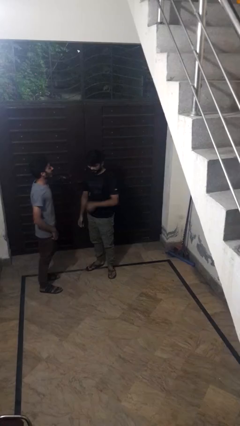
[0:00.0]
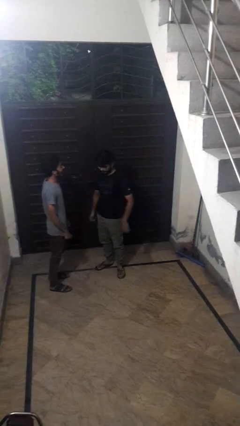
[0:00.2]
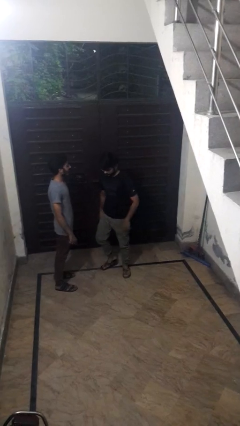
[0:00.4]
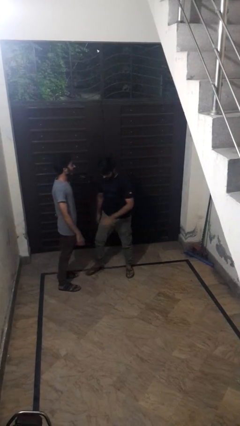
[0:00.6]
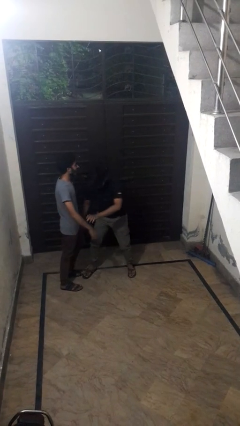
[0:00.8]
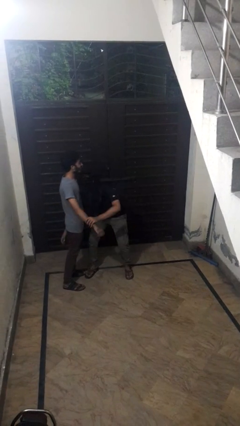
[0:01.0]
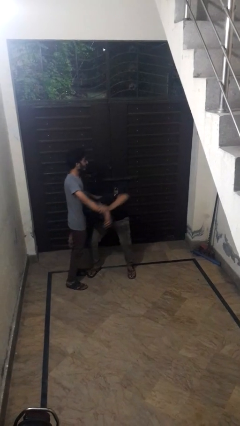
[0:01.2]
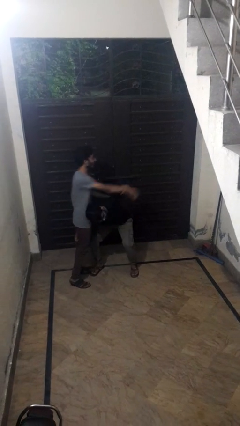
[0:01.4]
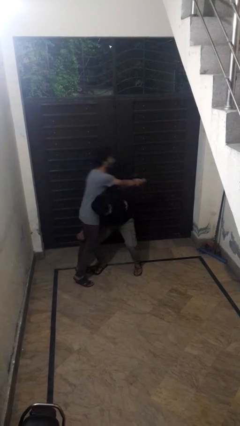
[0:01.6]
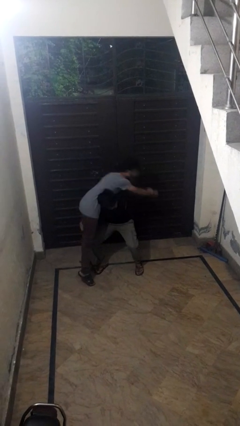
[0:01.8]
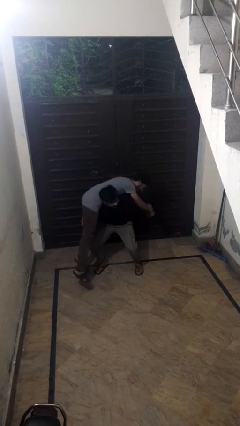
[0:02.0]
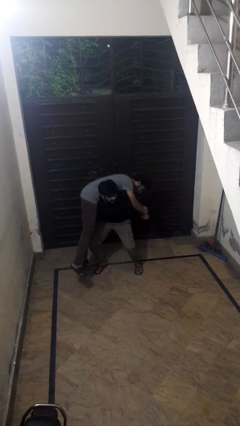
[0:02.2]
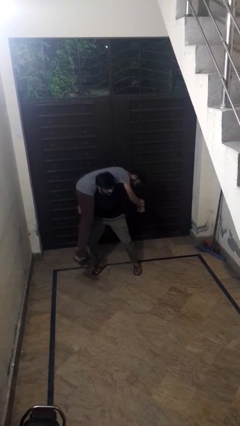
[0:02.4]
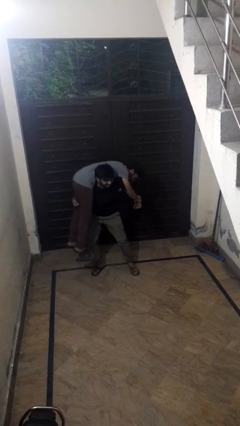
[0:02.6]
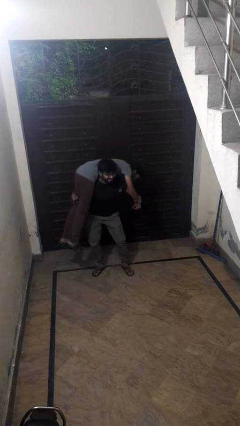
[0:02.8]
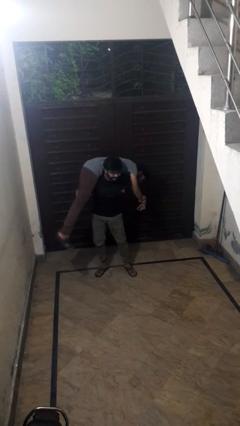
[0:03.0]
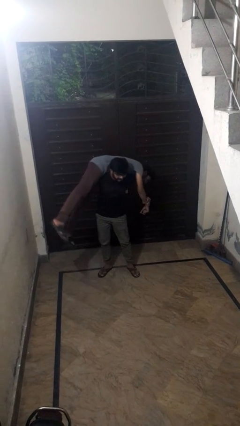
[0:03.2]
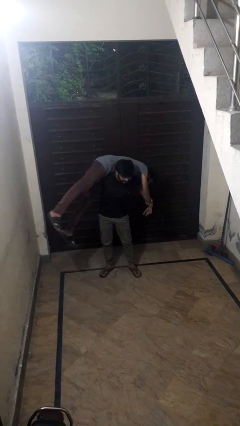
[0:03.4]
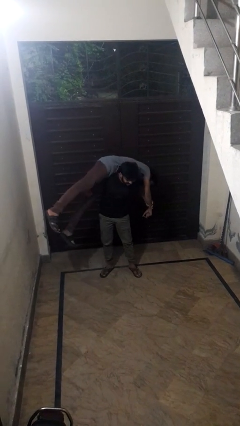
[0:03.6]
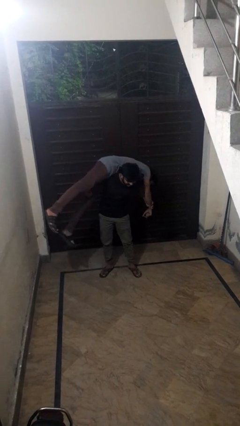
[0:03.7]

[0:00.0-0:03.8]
person carries person over shoulder

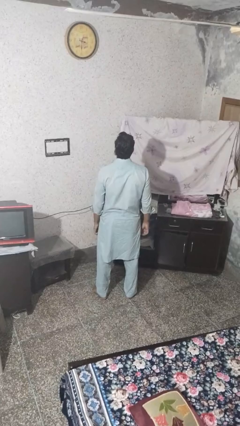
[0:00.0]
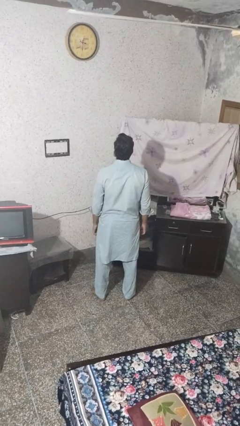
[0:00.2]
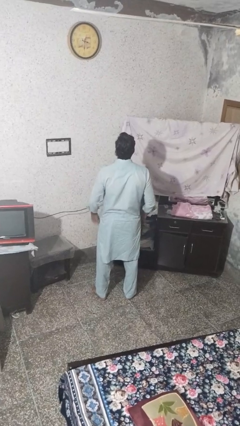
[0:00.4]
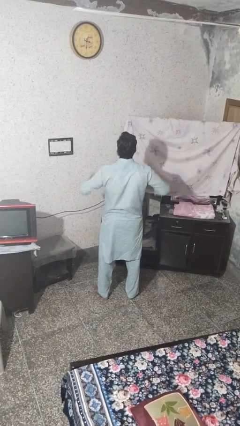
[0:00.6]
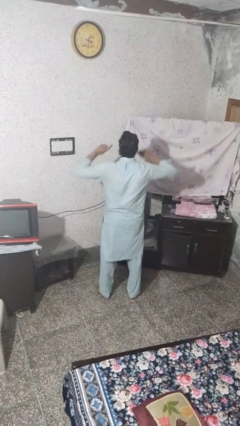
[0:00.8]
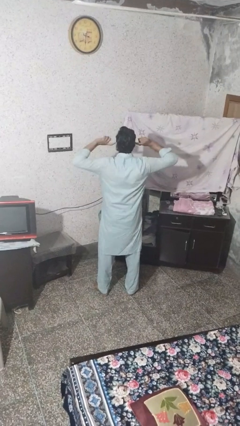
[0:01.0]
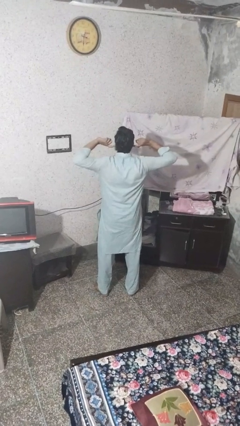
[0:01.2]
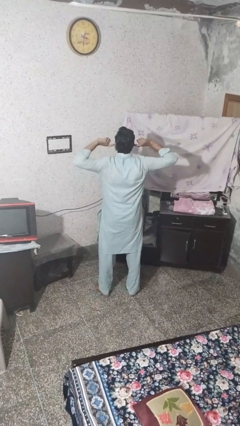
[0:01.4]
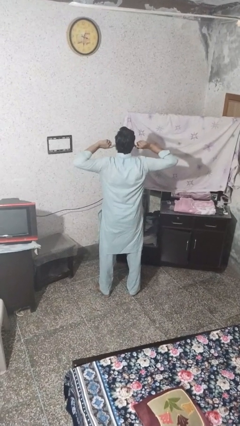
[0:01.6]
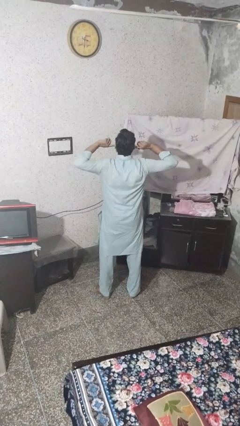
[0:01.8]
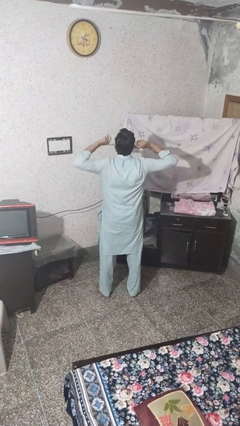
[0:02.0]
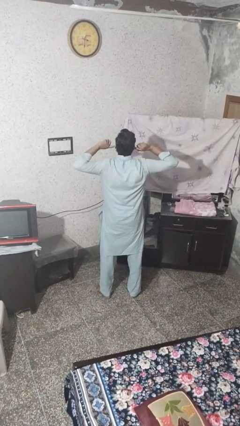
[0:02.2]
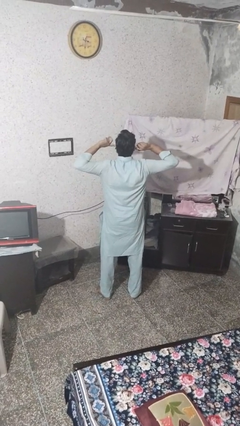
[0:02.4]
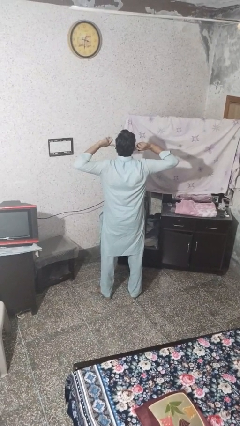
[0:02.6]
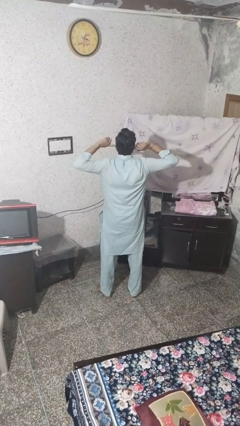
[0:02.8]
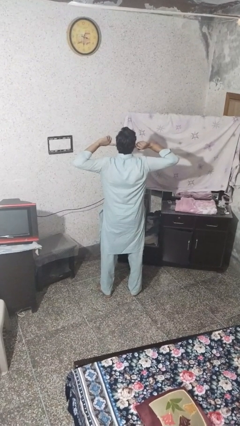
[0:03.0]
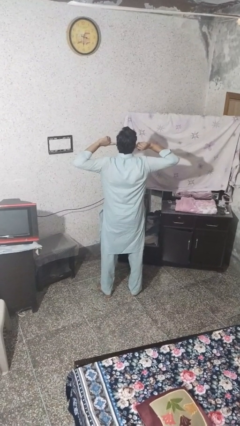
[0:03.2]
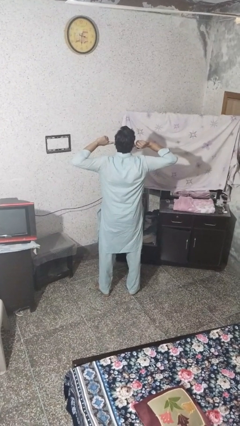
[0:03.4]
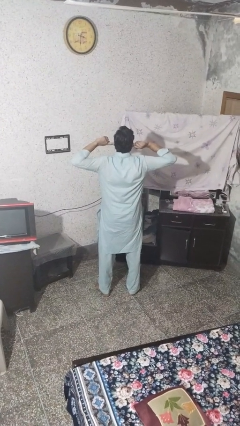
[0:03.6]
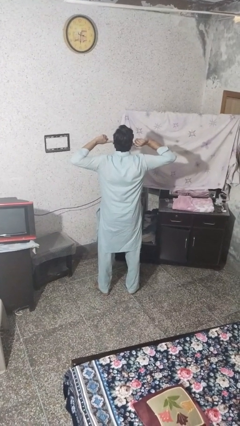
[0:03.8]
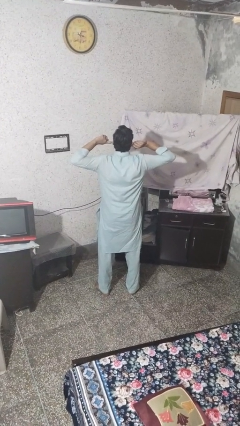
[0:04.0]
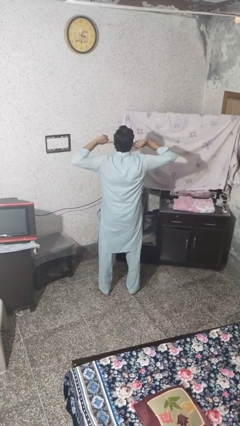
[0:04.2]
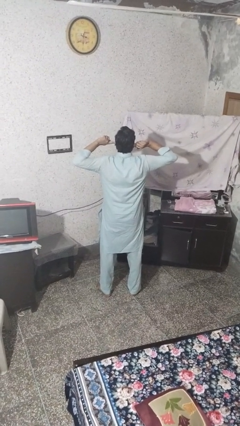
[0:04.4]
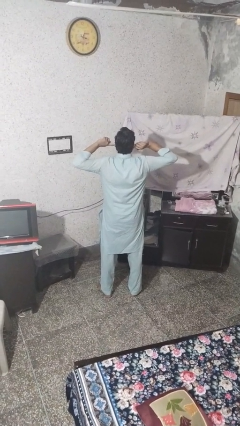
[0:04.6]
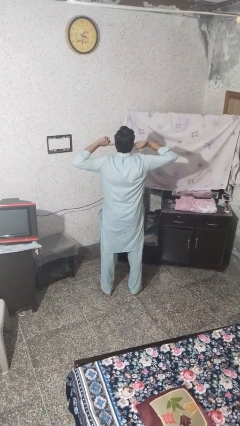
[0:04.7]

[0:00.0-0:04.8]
person puts fingers in ear

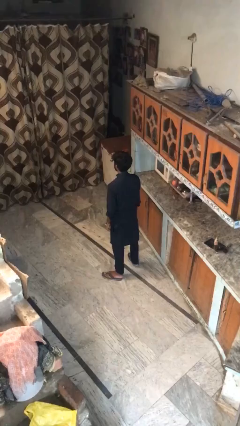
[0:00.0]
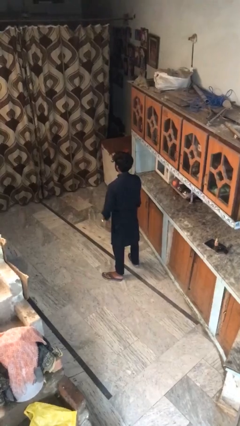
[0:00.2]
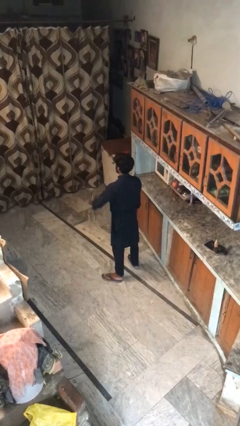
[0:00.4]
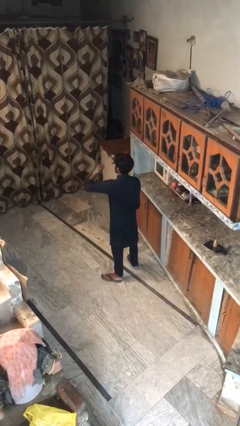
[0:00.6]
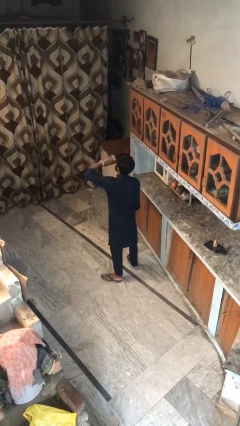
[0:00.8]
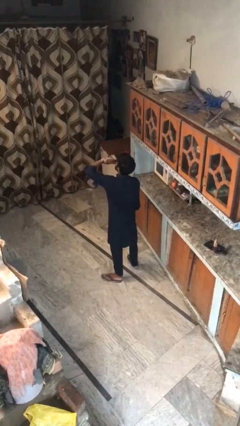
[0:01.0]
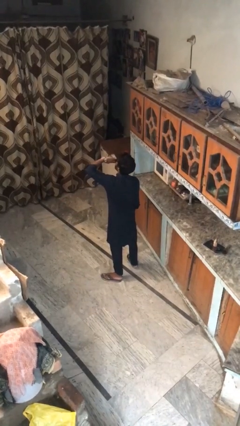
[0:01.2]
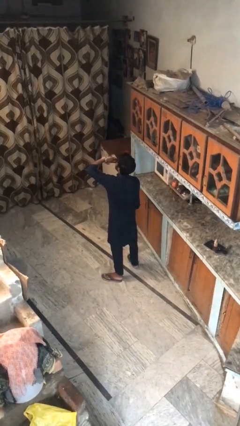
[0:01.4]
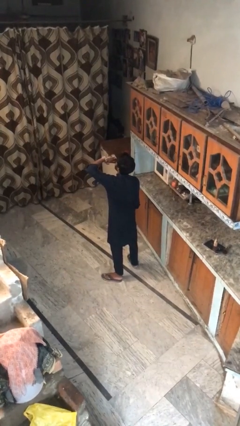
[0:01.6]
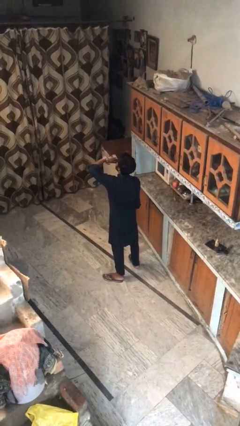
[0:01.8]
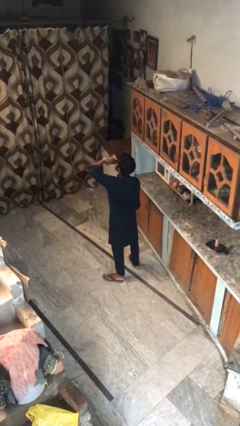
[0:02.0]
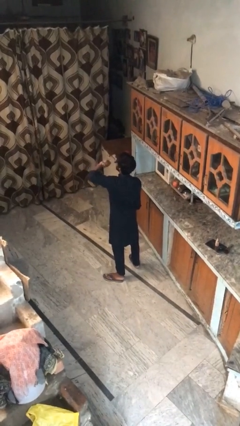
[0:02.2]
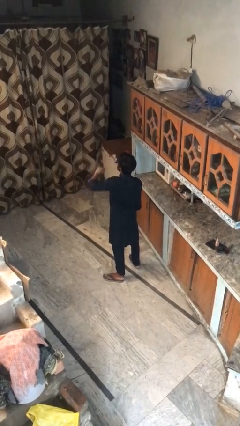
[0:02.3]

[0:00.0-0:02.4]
person yawns

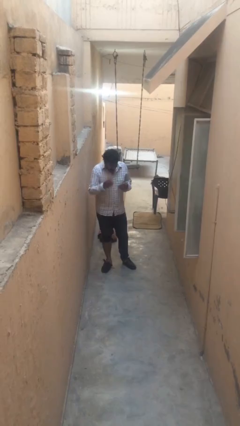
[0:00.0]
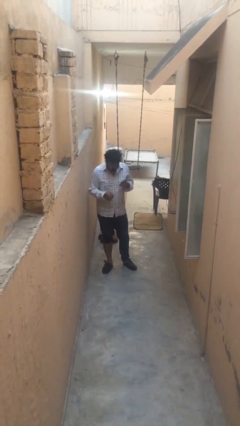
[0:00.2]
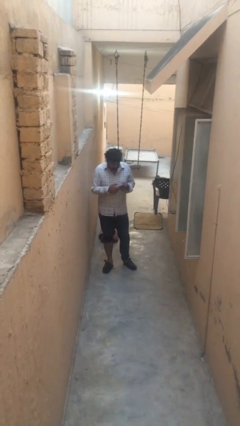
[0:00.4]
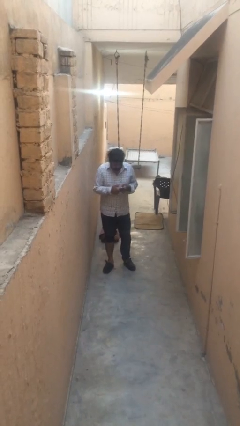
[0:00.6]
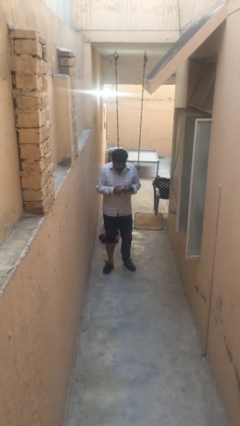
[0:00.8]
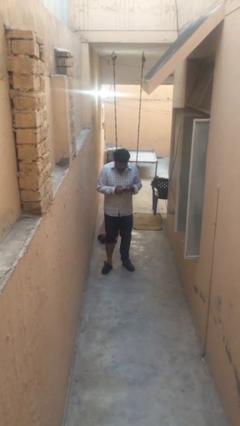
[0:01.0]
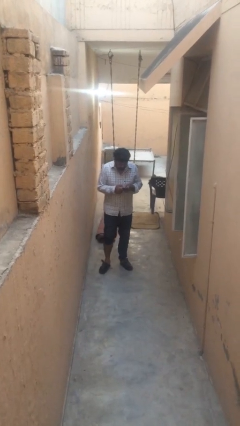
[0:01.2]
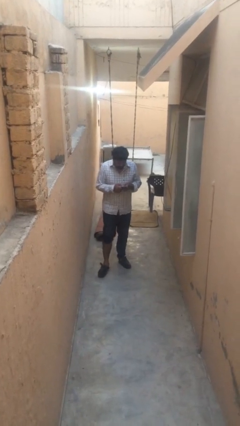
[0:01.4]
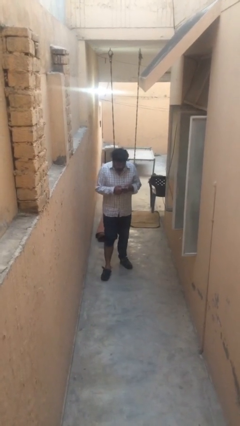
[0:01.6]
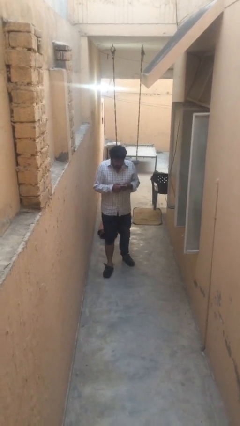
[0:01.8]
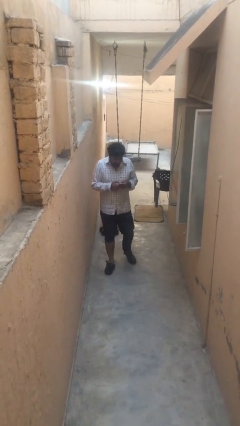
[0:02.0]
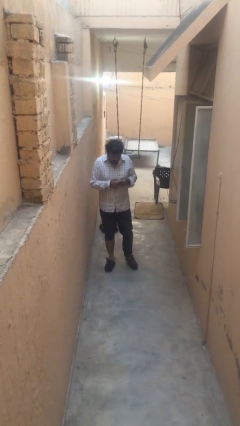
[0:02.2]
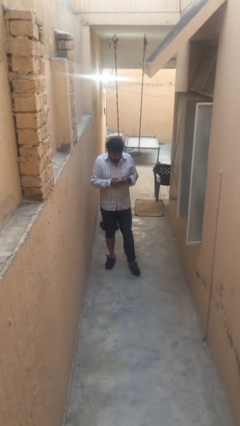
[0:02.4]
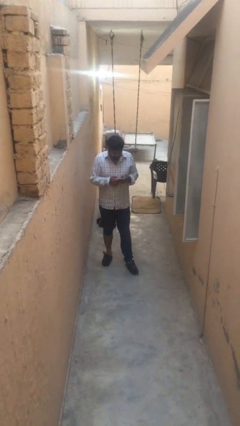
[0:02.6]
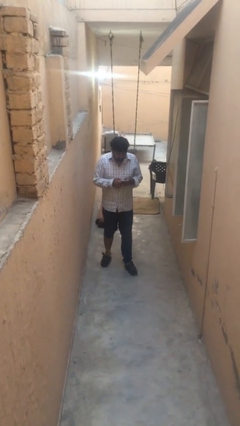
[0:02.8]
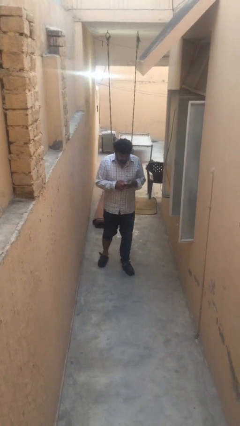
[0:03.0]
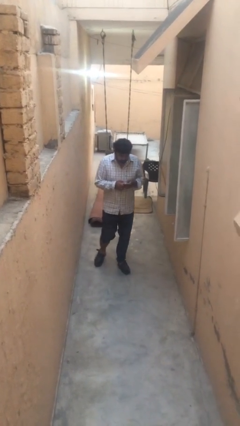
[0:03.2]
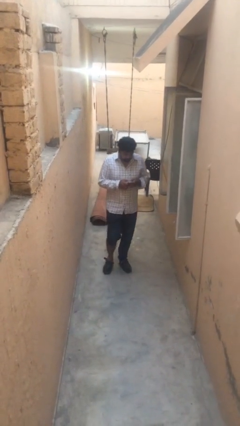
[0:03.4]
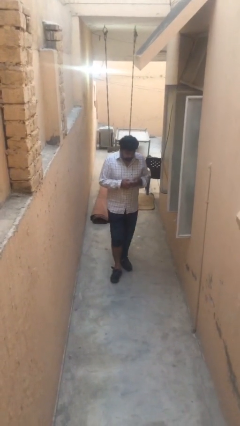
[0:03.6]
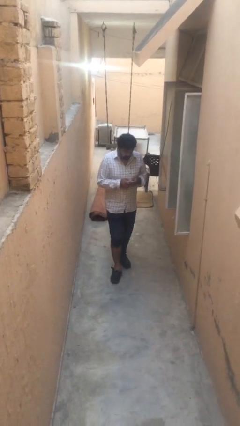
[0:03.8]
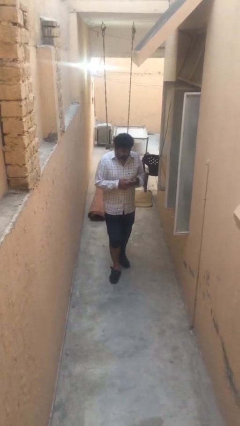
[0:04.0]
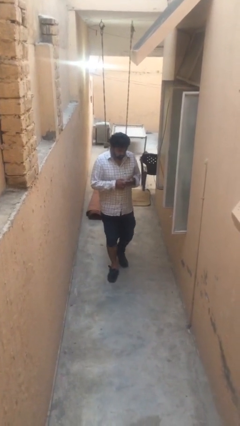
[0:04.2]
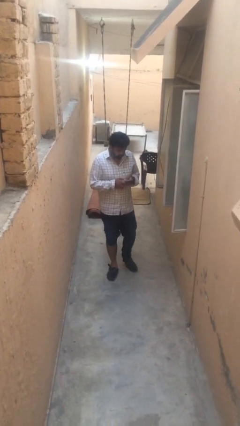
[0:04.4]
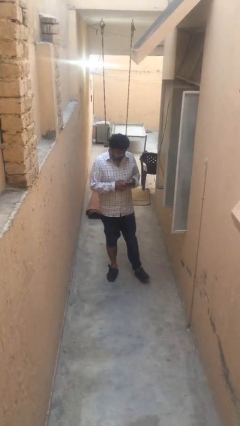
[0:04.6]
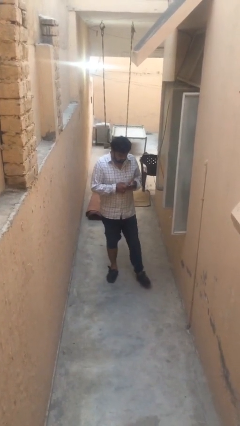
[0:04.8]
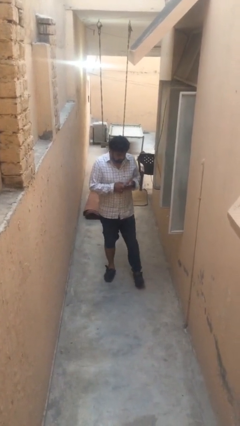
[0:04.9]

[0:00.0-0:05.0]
person texts on phone

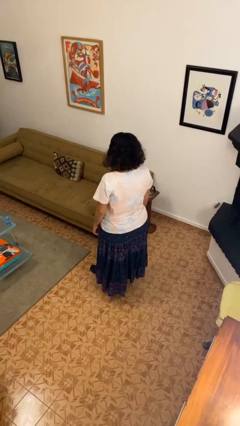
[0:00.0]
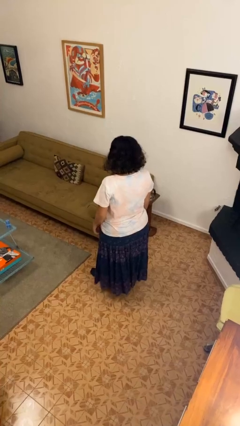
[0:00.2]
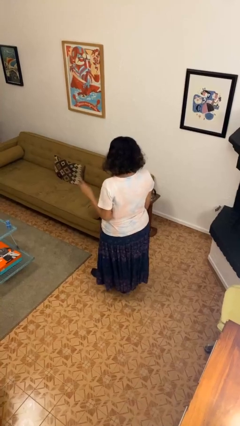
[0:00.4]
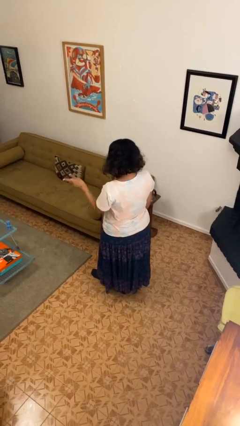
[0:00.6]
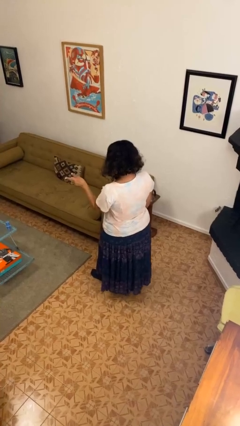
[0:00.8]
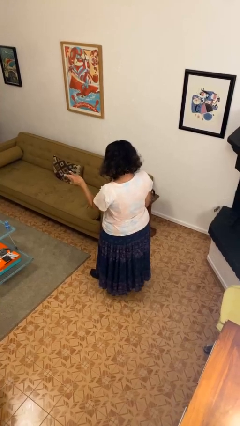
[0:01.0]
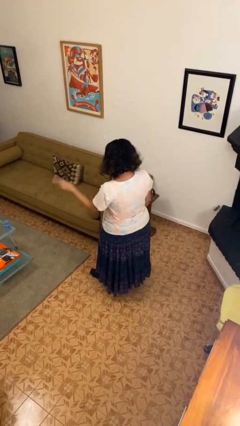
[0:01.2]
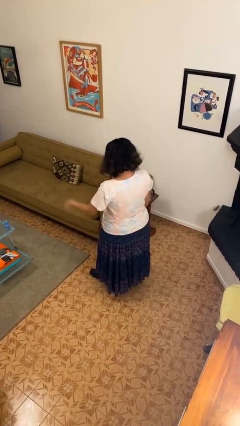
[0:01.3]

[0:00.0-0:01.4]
person gestures peace
